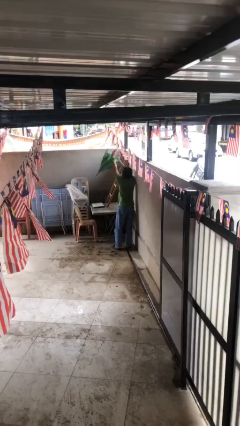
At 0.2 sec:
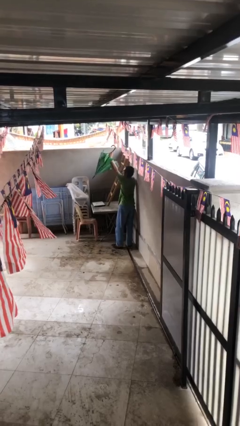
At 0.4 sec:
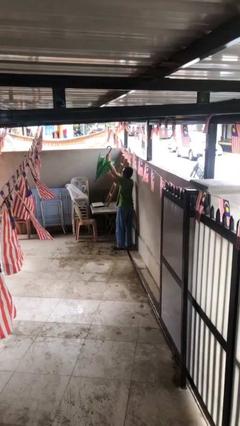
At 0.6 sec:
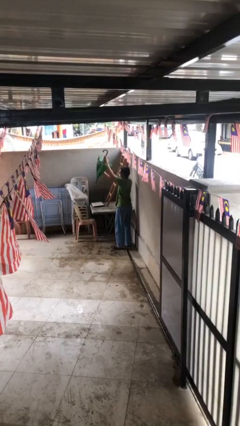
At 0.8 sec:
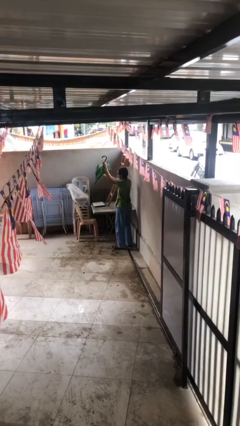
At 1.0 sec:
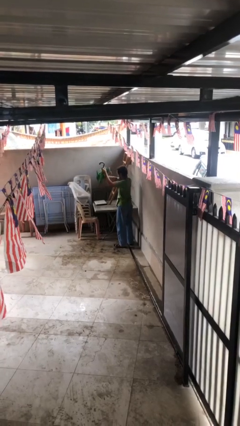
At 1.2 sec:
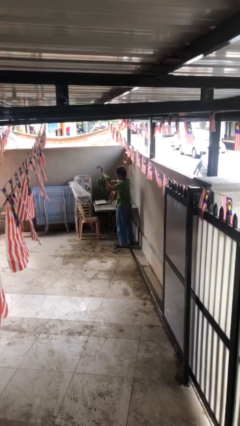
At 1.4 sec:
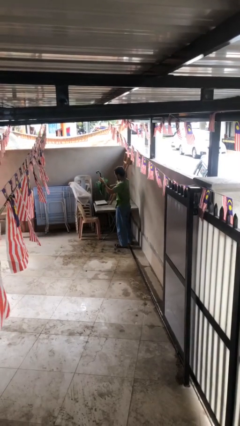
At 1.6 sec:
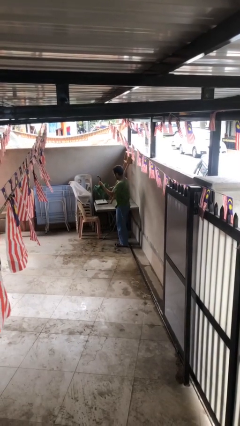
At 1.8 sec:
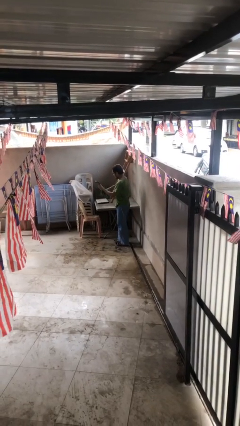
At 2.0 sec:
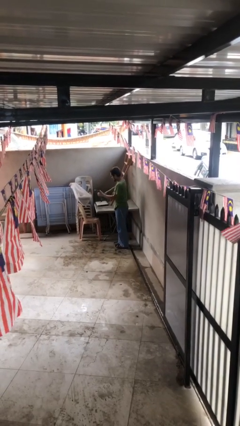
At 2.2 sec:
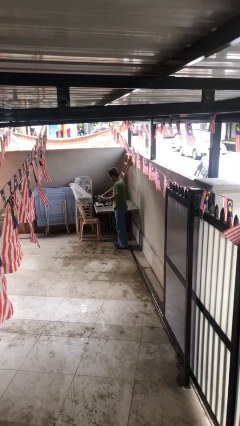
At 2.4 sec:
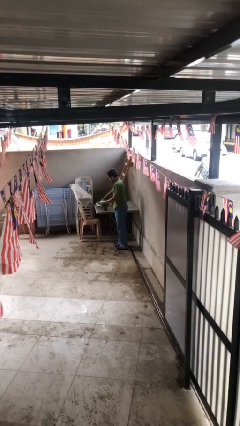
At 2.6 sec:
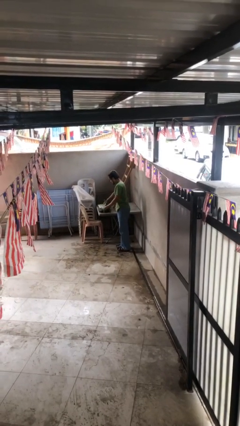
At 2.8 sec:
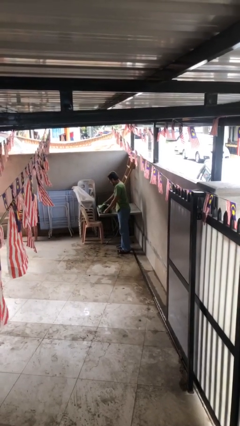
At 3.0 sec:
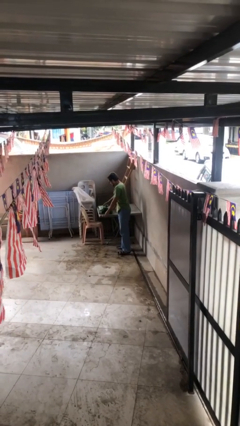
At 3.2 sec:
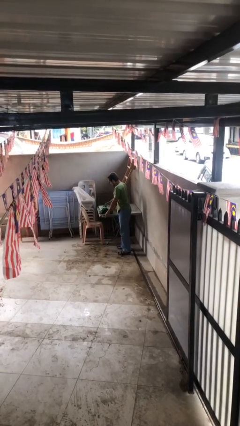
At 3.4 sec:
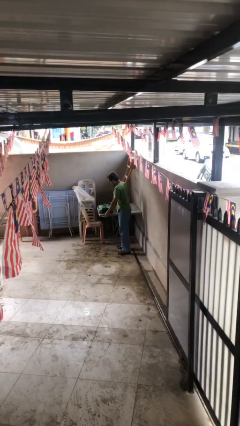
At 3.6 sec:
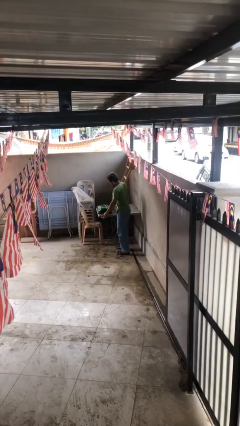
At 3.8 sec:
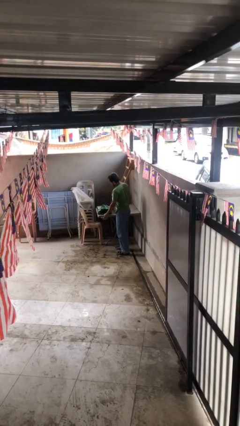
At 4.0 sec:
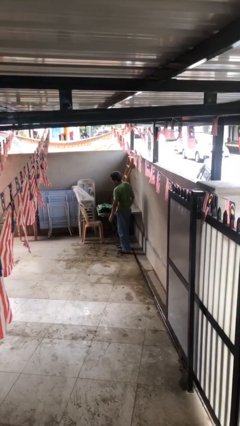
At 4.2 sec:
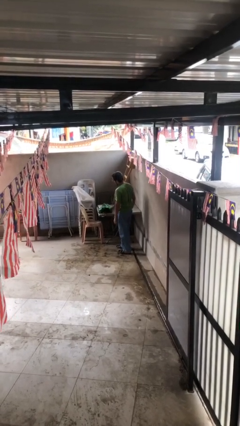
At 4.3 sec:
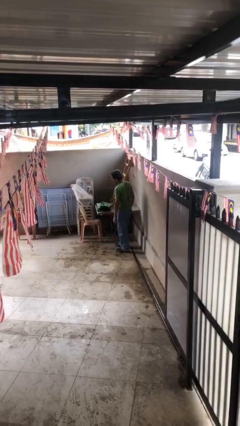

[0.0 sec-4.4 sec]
person puts down object on table

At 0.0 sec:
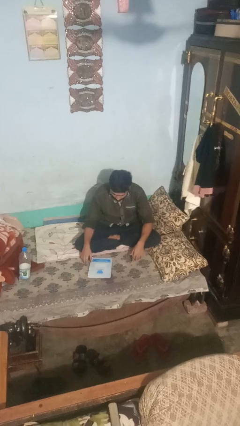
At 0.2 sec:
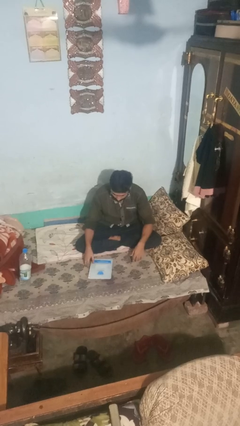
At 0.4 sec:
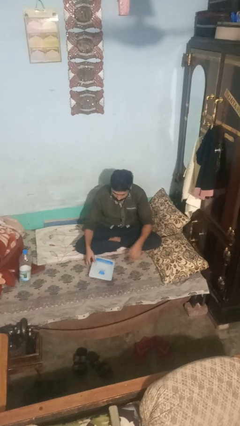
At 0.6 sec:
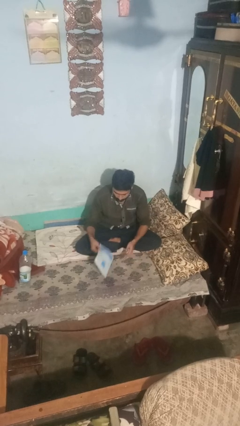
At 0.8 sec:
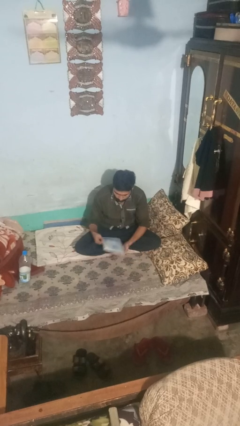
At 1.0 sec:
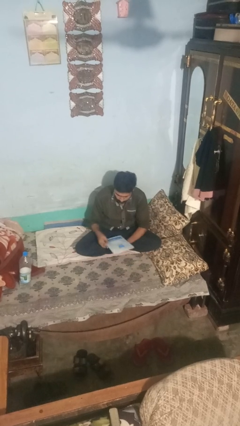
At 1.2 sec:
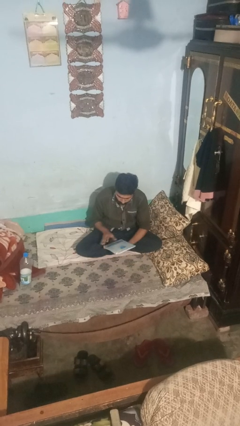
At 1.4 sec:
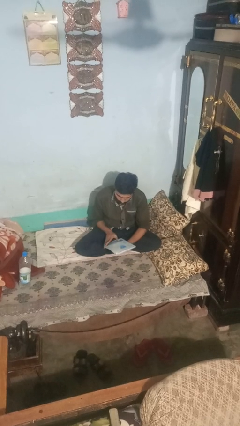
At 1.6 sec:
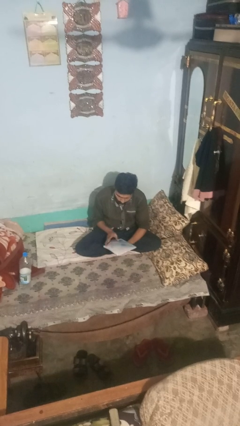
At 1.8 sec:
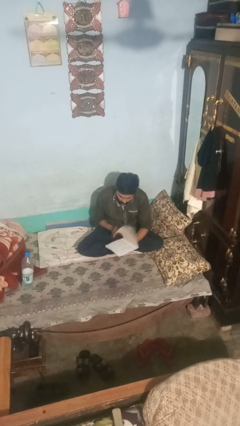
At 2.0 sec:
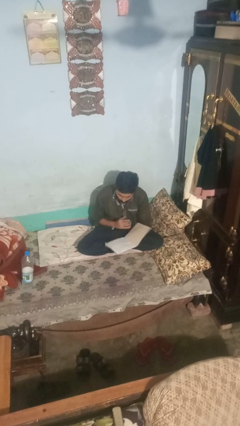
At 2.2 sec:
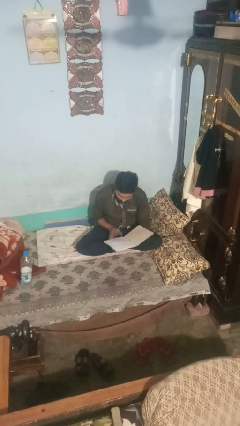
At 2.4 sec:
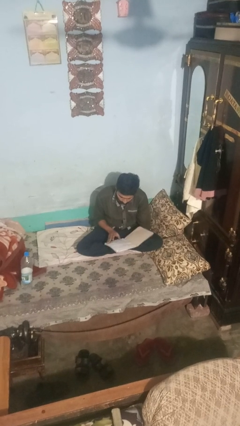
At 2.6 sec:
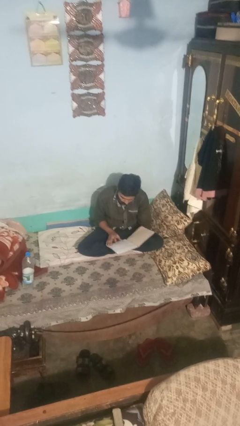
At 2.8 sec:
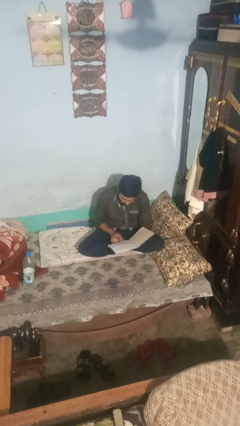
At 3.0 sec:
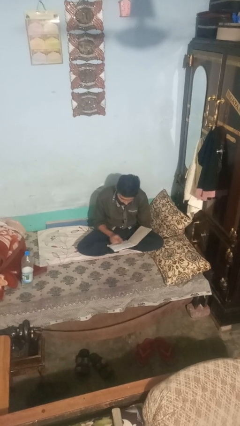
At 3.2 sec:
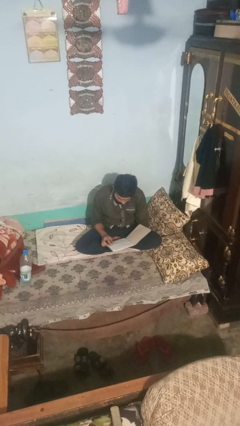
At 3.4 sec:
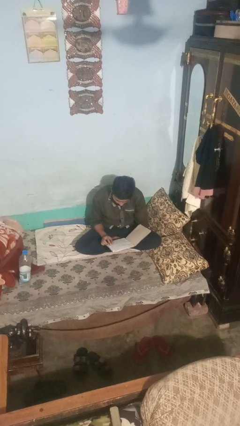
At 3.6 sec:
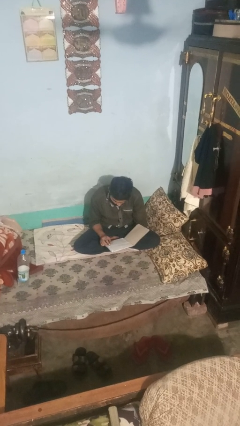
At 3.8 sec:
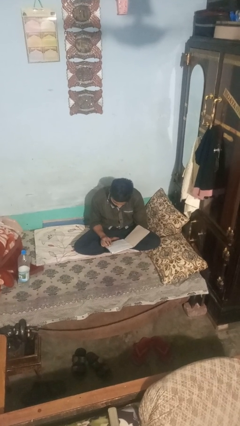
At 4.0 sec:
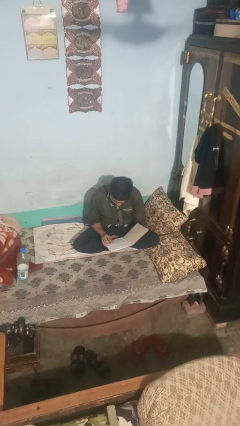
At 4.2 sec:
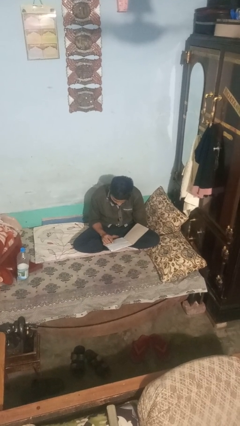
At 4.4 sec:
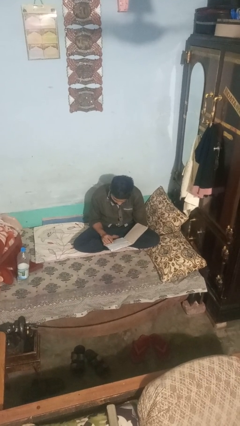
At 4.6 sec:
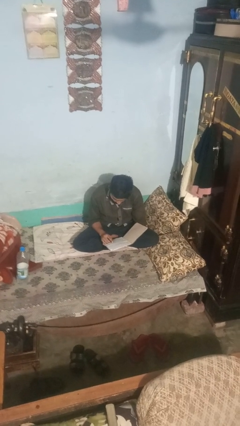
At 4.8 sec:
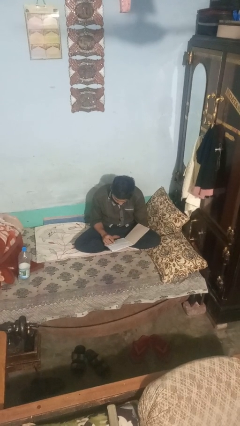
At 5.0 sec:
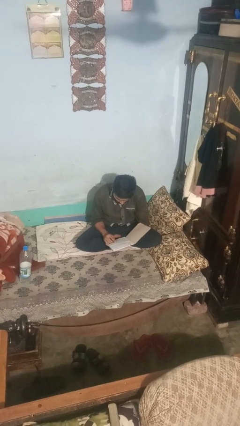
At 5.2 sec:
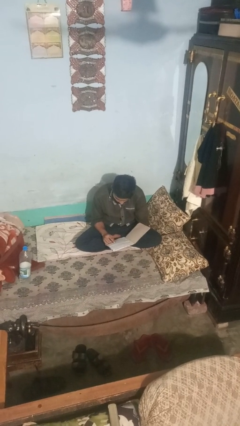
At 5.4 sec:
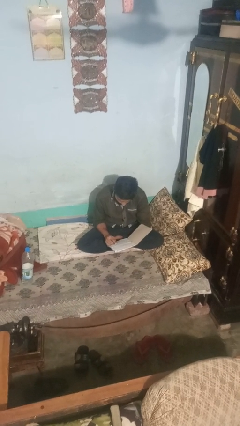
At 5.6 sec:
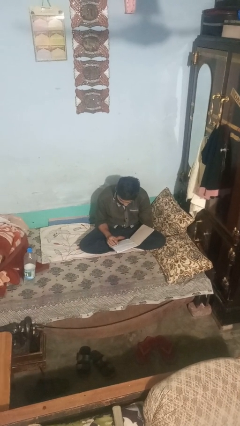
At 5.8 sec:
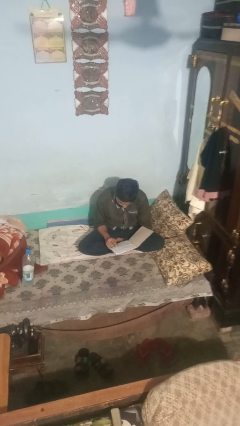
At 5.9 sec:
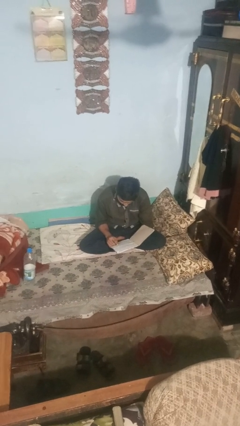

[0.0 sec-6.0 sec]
person reads book

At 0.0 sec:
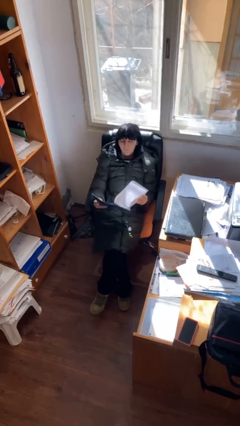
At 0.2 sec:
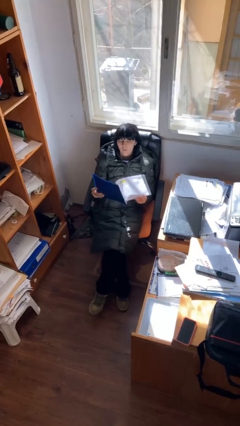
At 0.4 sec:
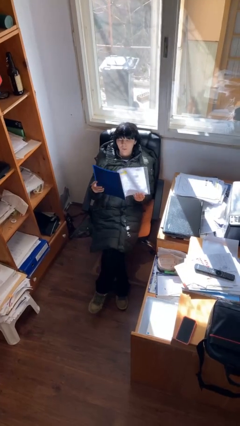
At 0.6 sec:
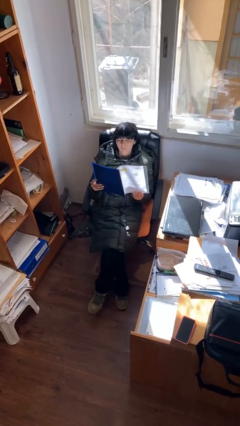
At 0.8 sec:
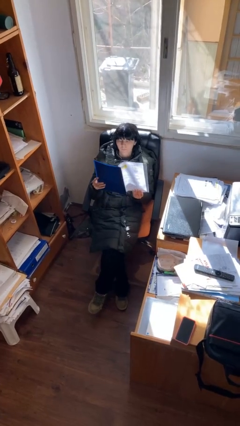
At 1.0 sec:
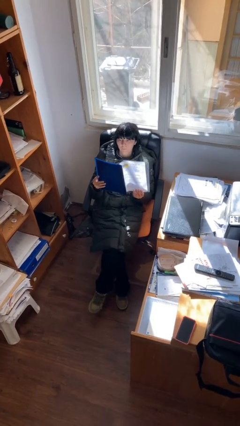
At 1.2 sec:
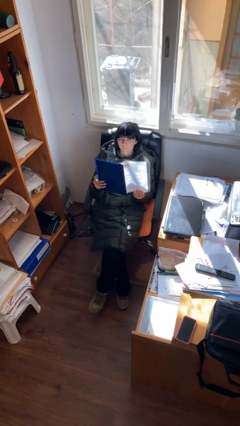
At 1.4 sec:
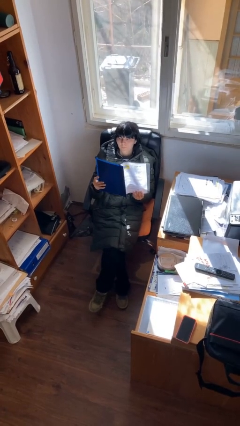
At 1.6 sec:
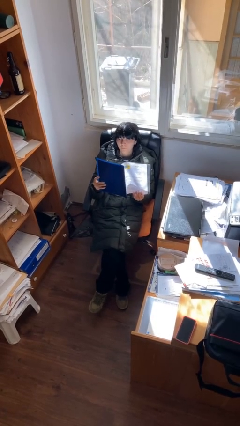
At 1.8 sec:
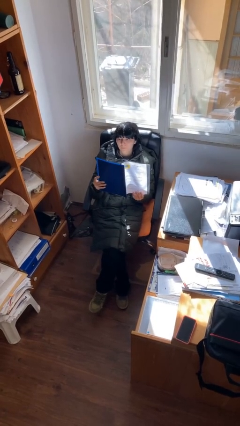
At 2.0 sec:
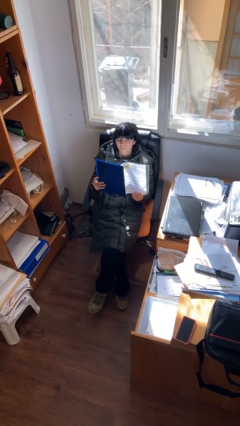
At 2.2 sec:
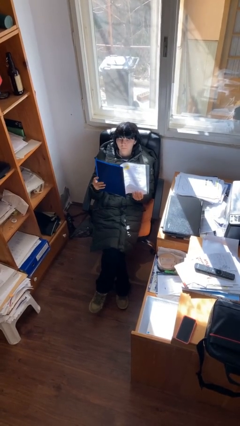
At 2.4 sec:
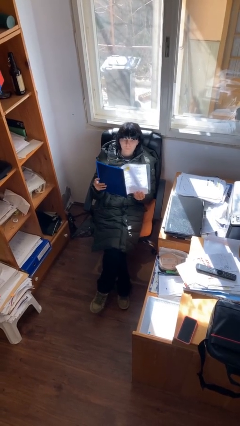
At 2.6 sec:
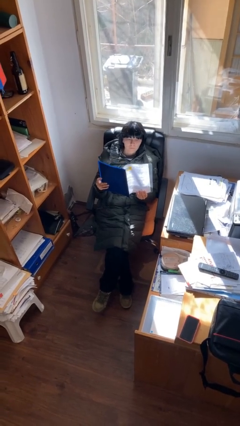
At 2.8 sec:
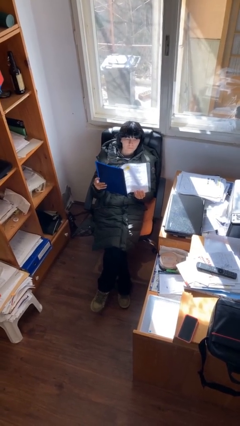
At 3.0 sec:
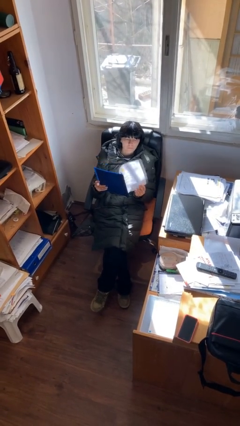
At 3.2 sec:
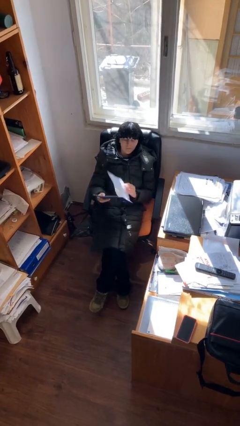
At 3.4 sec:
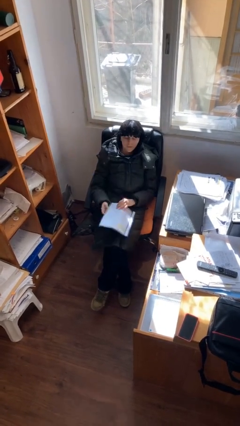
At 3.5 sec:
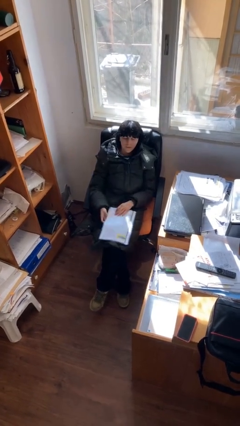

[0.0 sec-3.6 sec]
person reads document

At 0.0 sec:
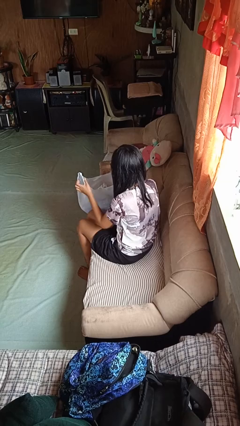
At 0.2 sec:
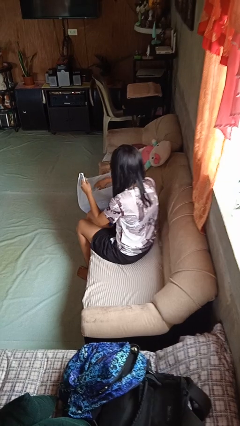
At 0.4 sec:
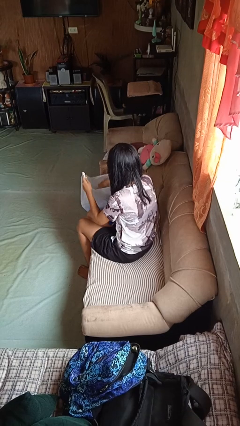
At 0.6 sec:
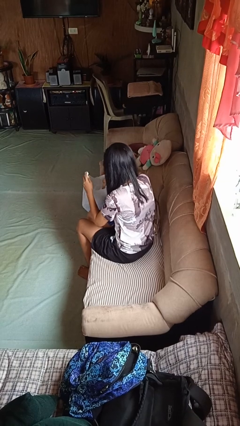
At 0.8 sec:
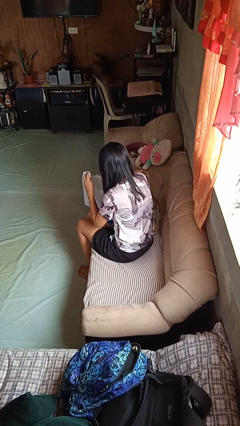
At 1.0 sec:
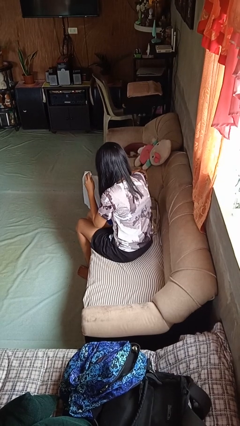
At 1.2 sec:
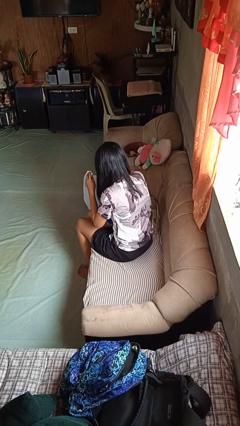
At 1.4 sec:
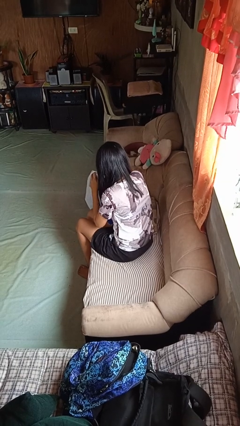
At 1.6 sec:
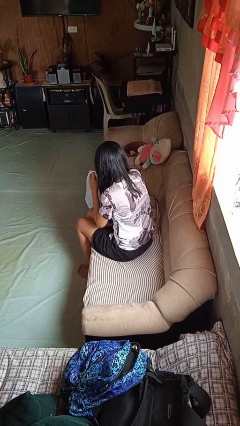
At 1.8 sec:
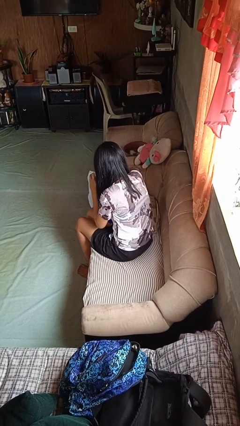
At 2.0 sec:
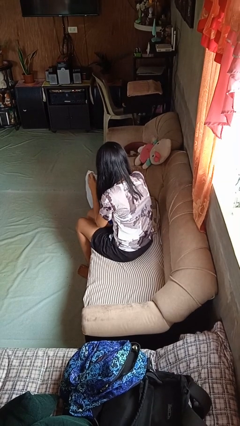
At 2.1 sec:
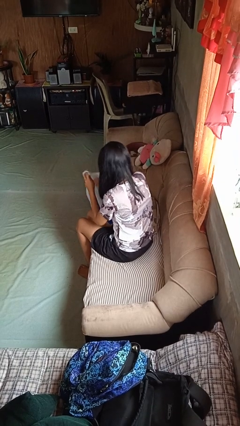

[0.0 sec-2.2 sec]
person searches in bag

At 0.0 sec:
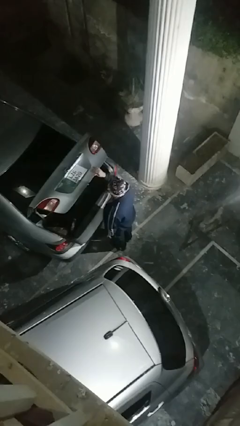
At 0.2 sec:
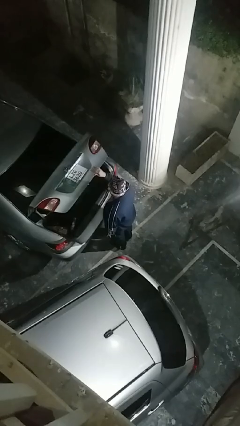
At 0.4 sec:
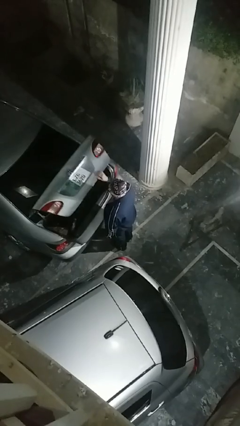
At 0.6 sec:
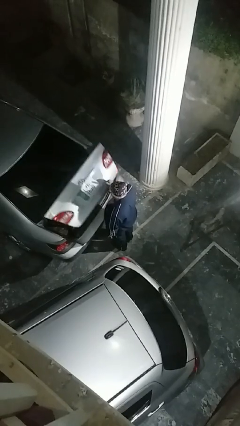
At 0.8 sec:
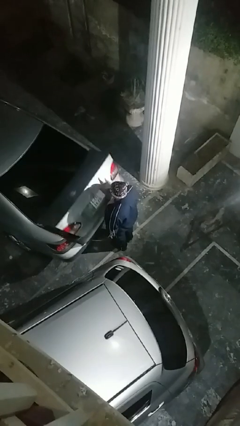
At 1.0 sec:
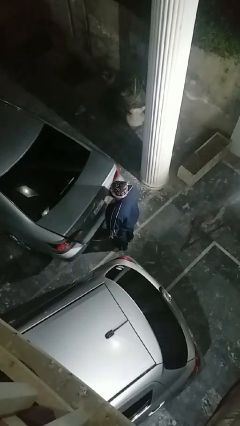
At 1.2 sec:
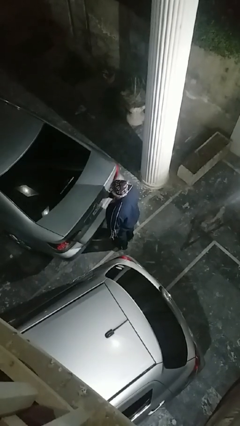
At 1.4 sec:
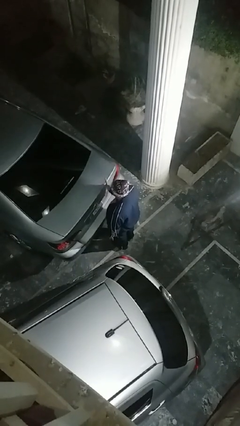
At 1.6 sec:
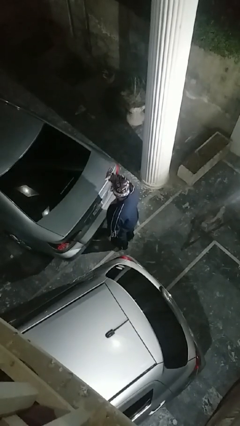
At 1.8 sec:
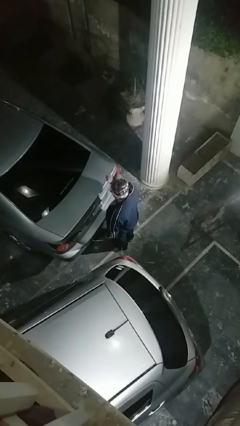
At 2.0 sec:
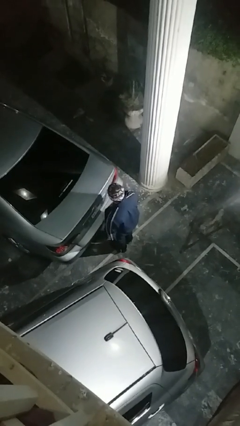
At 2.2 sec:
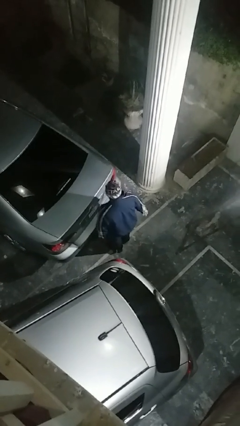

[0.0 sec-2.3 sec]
person closes car trunk
